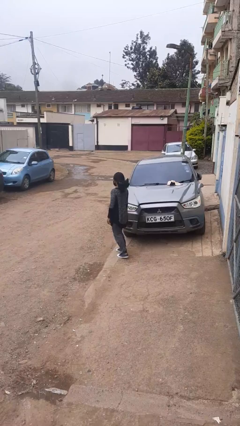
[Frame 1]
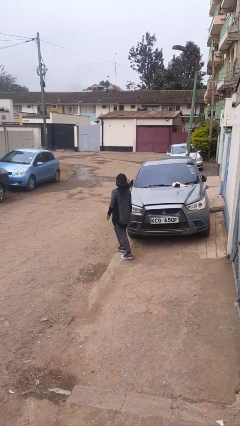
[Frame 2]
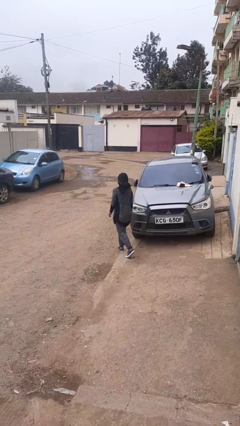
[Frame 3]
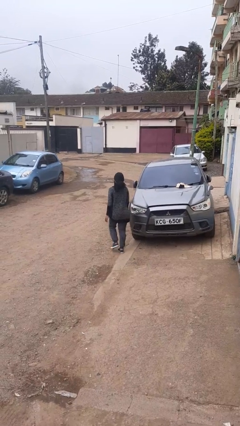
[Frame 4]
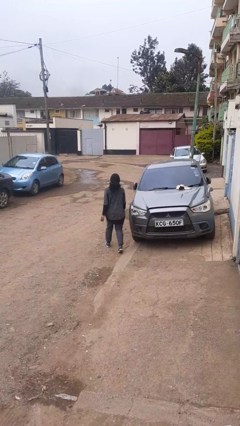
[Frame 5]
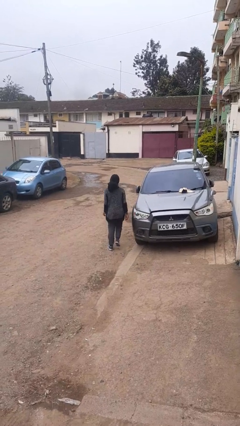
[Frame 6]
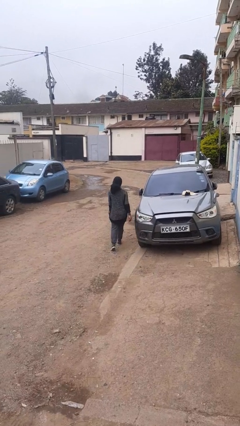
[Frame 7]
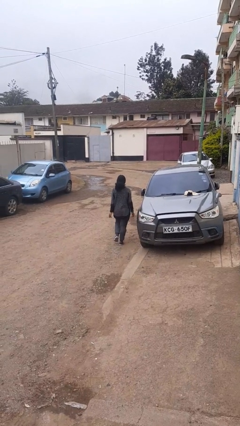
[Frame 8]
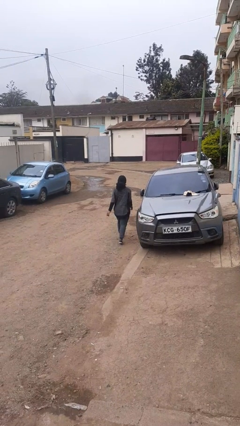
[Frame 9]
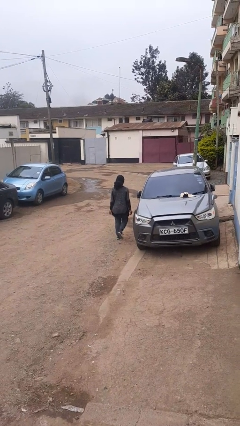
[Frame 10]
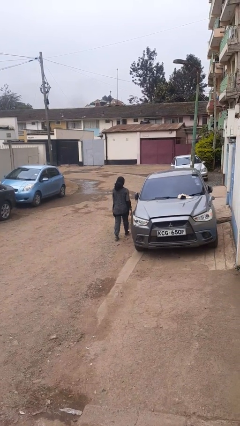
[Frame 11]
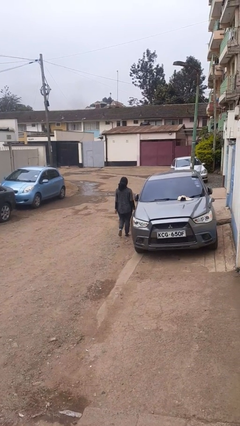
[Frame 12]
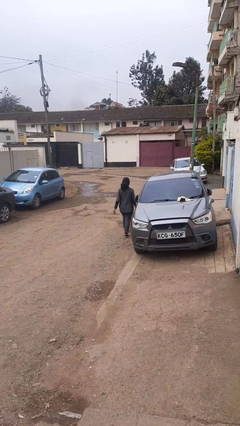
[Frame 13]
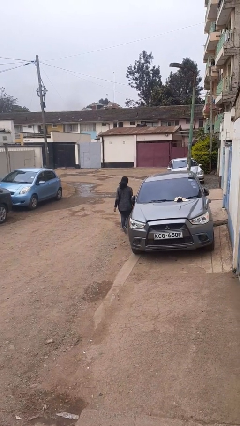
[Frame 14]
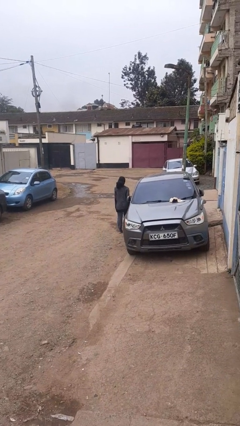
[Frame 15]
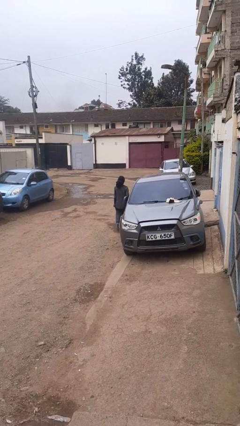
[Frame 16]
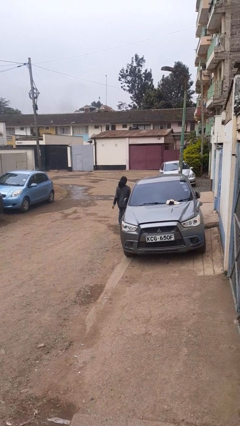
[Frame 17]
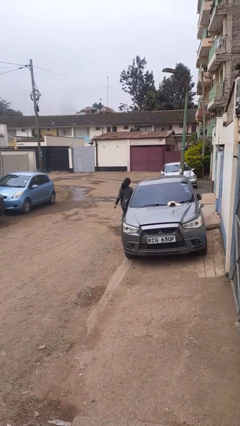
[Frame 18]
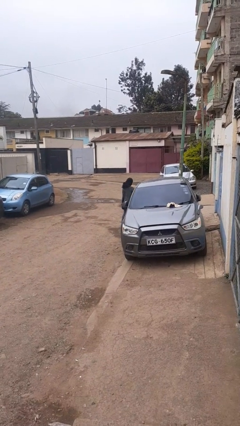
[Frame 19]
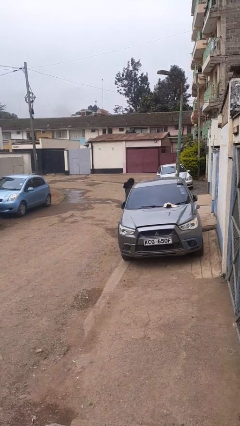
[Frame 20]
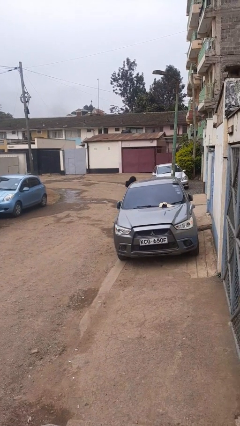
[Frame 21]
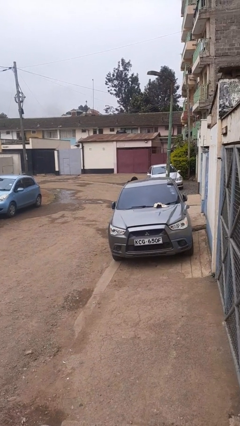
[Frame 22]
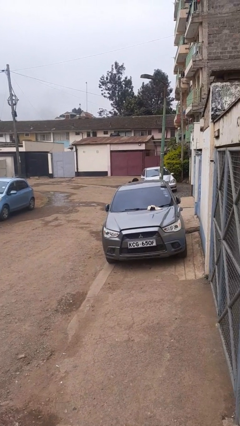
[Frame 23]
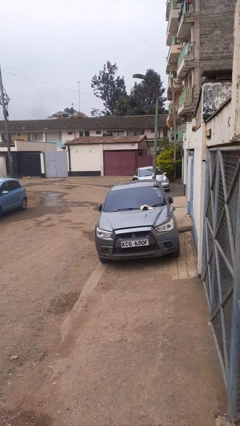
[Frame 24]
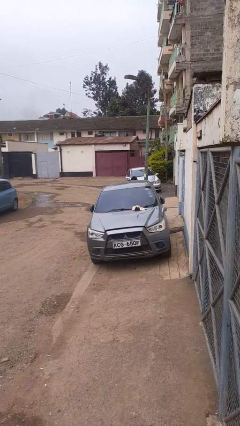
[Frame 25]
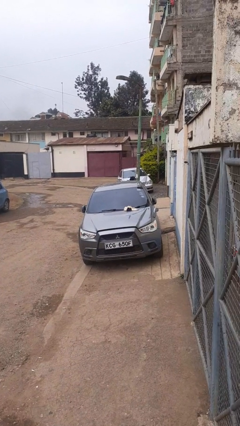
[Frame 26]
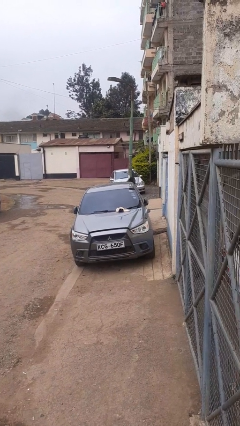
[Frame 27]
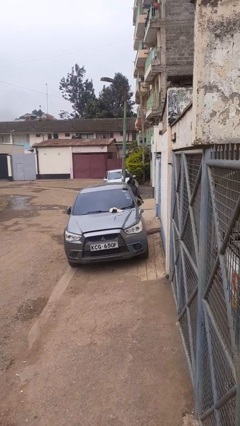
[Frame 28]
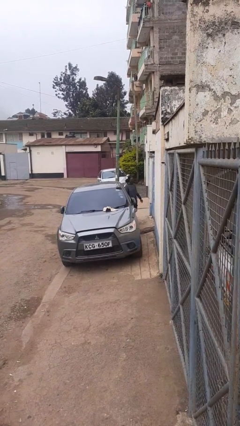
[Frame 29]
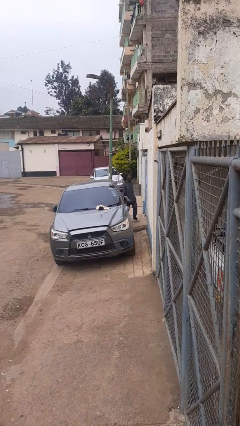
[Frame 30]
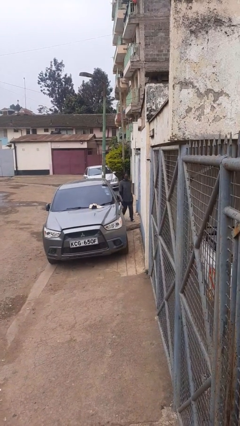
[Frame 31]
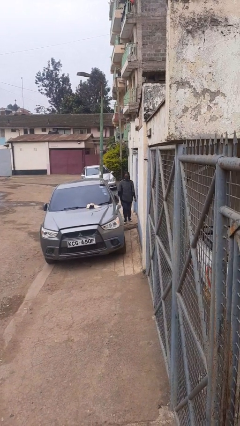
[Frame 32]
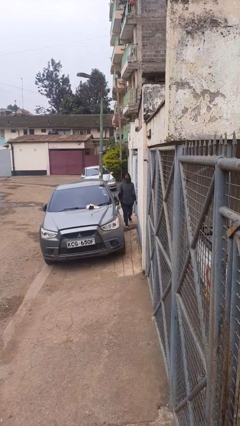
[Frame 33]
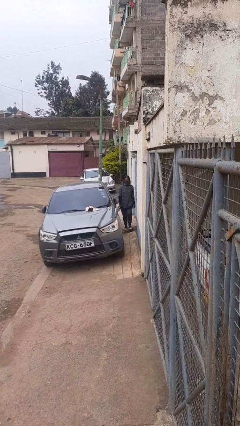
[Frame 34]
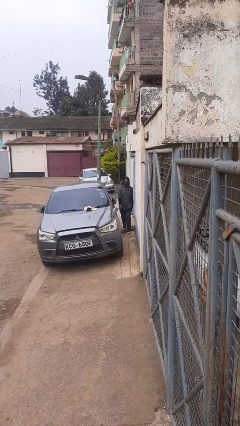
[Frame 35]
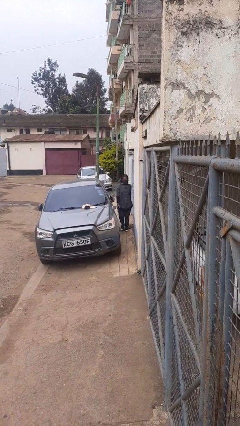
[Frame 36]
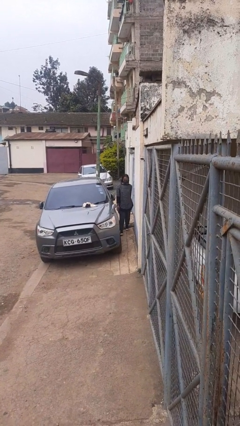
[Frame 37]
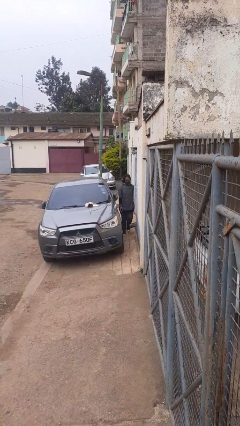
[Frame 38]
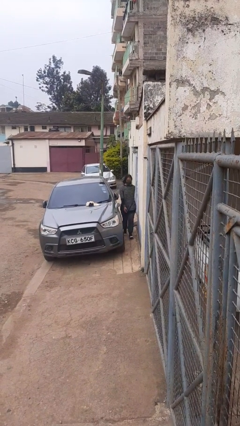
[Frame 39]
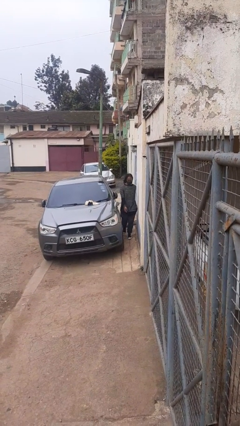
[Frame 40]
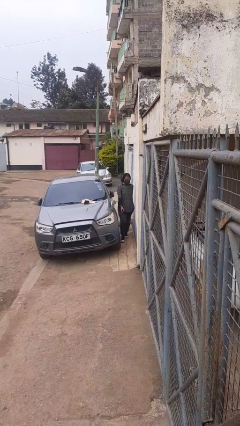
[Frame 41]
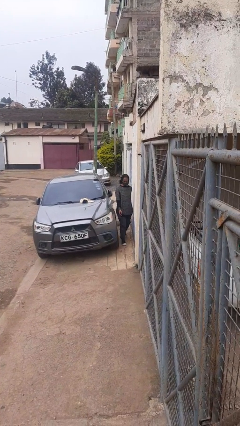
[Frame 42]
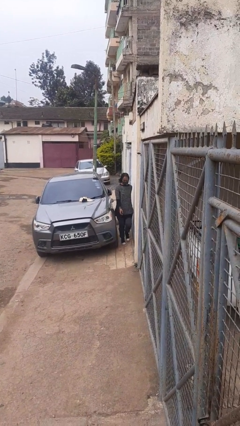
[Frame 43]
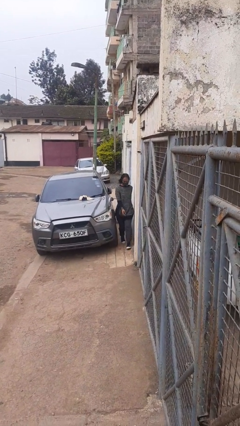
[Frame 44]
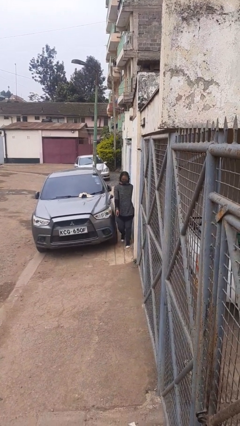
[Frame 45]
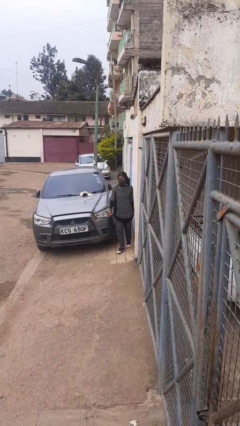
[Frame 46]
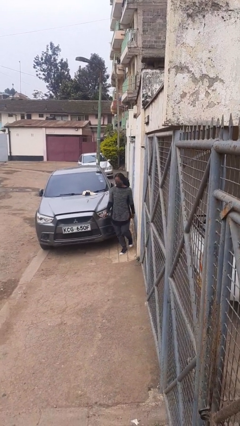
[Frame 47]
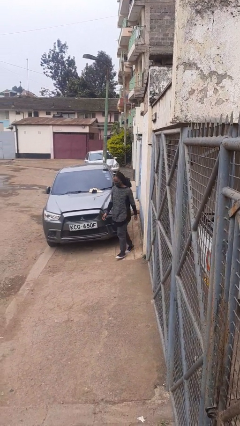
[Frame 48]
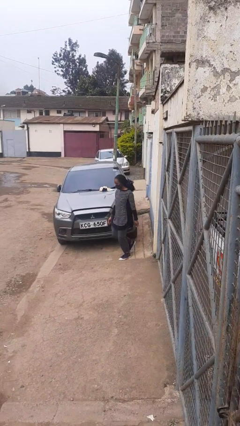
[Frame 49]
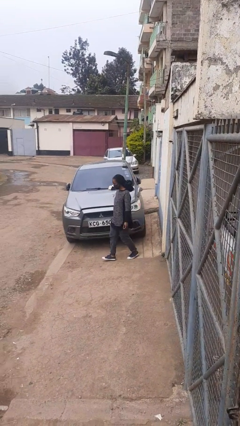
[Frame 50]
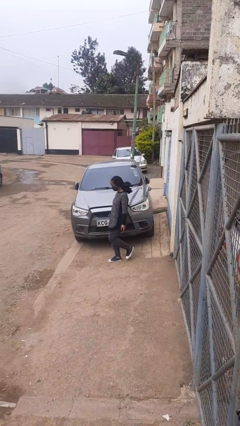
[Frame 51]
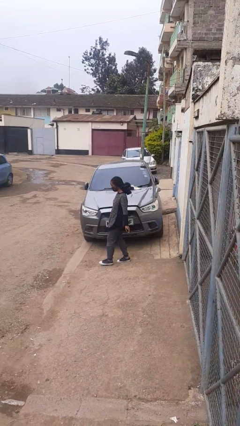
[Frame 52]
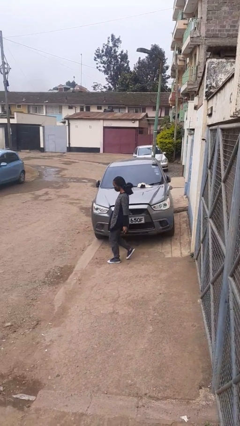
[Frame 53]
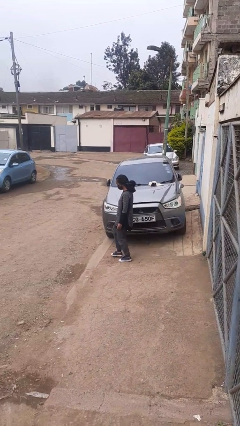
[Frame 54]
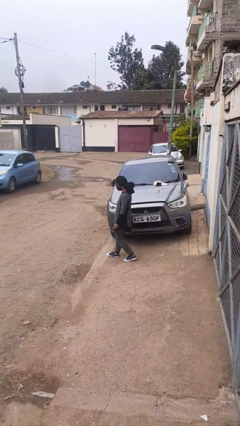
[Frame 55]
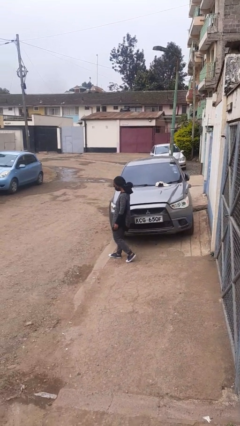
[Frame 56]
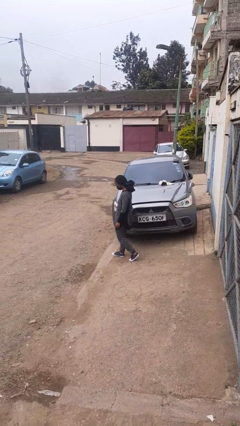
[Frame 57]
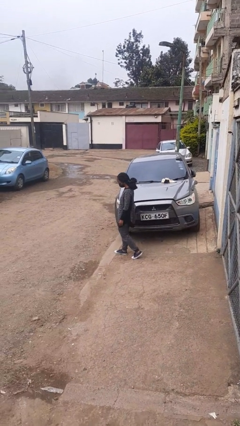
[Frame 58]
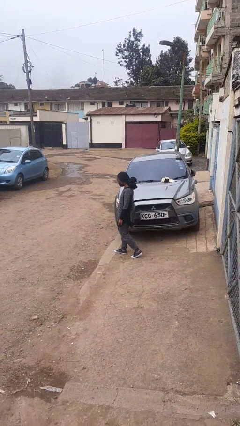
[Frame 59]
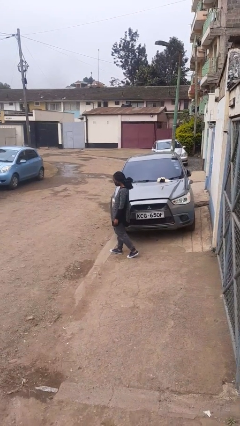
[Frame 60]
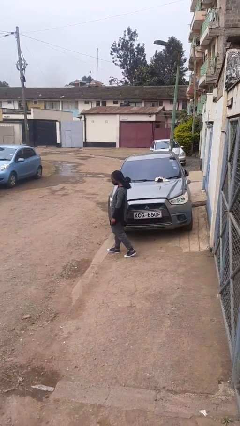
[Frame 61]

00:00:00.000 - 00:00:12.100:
person walks around car

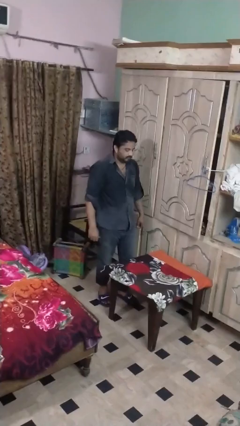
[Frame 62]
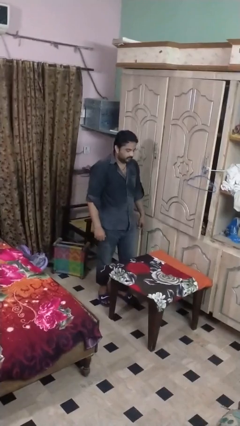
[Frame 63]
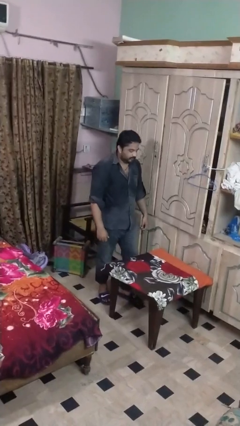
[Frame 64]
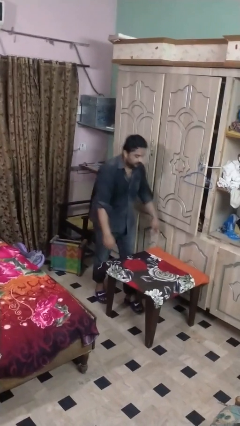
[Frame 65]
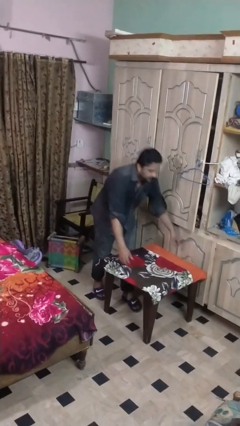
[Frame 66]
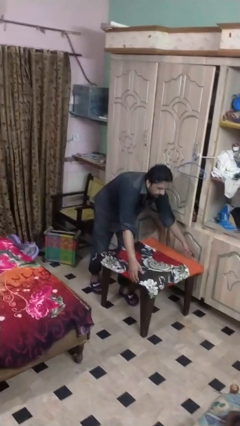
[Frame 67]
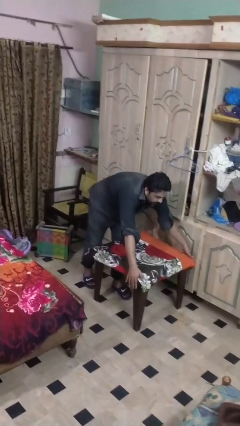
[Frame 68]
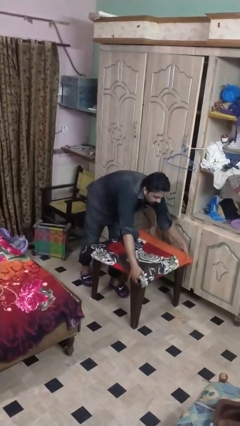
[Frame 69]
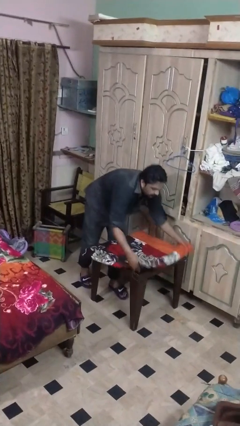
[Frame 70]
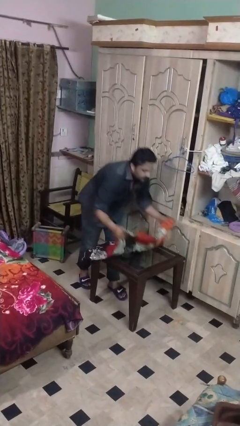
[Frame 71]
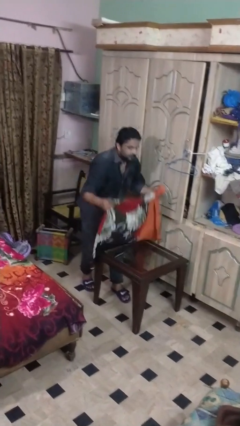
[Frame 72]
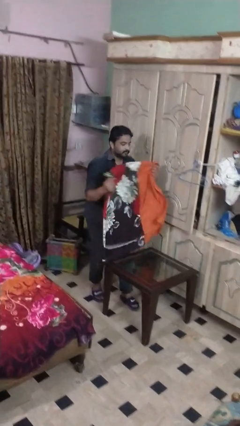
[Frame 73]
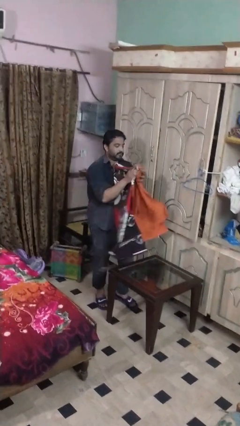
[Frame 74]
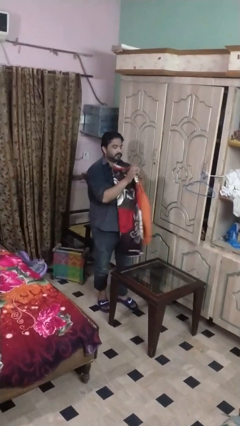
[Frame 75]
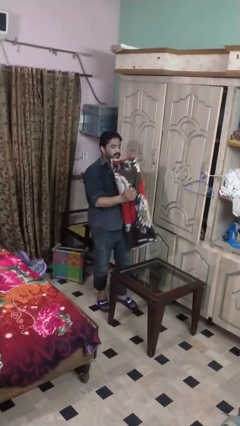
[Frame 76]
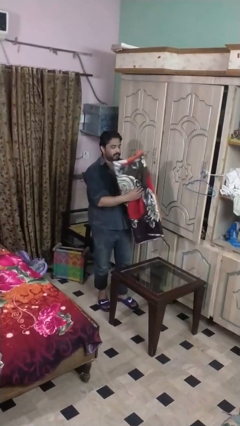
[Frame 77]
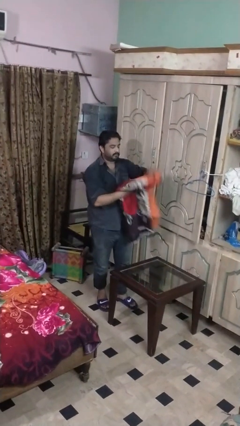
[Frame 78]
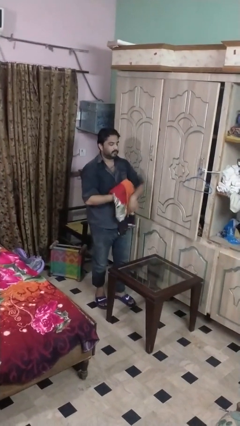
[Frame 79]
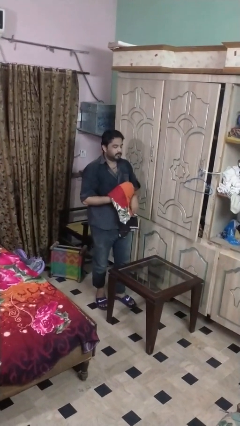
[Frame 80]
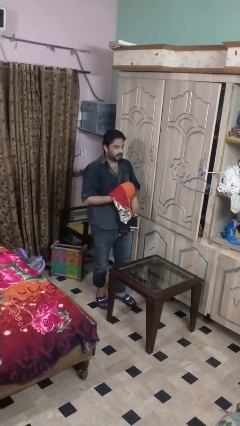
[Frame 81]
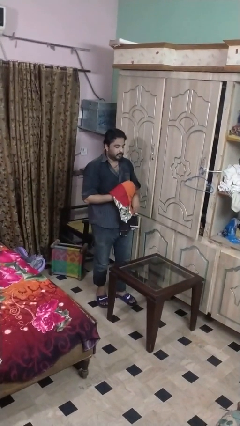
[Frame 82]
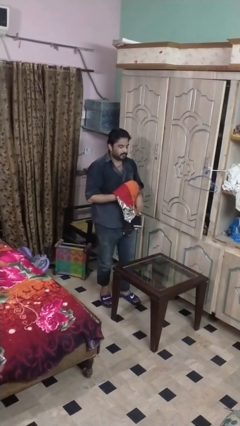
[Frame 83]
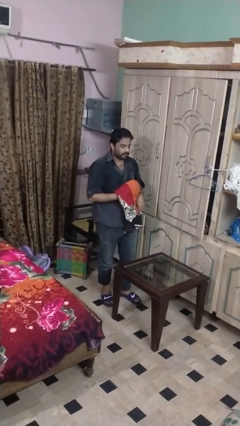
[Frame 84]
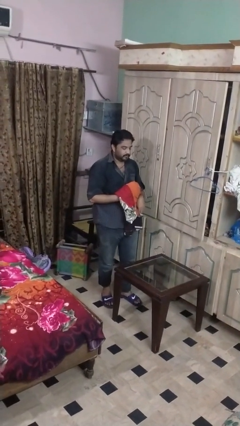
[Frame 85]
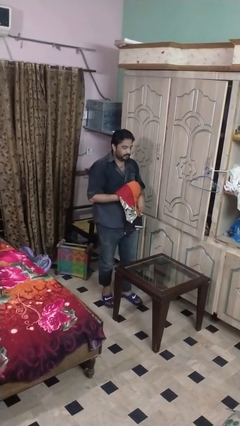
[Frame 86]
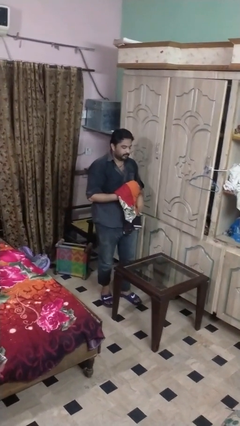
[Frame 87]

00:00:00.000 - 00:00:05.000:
person folds tablecloth

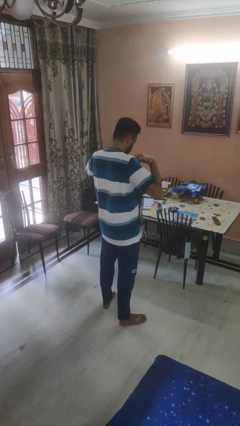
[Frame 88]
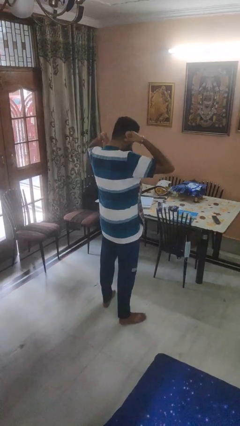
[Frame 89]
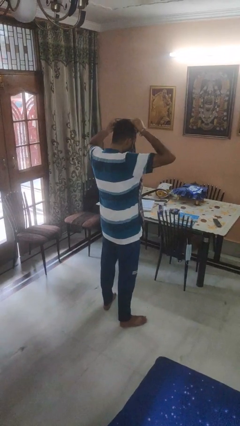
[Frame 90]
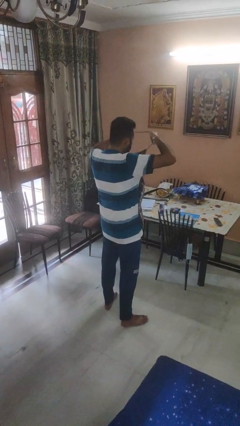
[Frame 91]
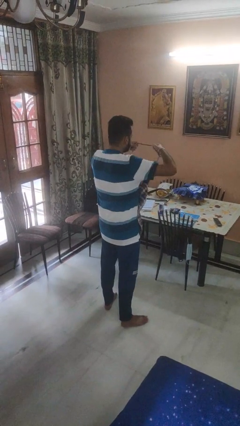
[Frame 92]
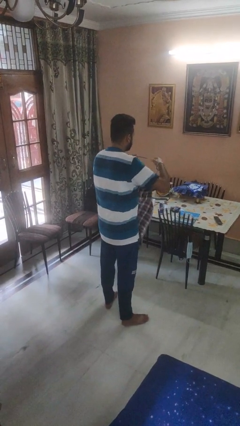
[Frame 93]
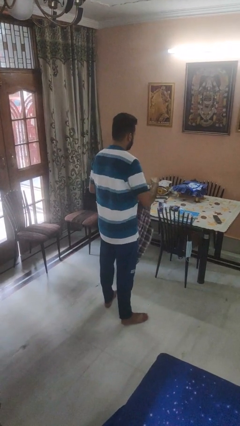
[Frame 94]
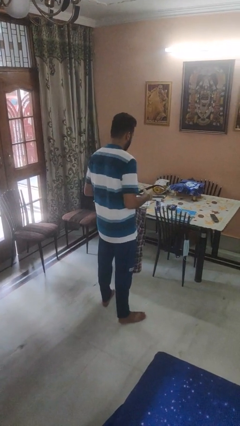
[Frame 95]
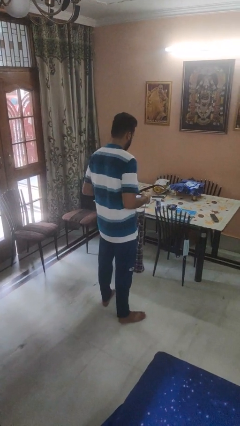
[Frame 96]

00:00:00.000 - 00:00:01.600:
person takes off apron
